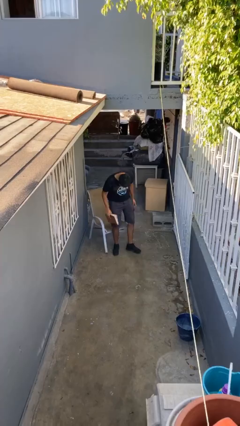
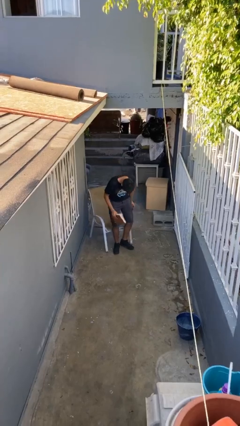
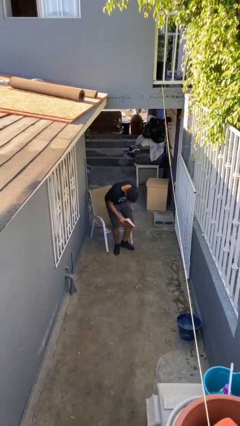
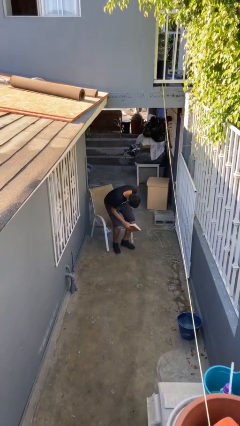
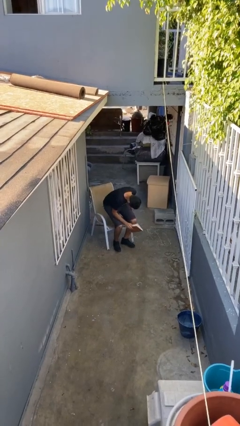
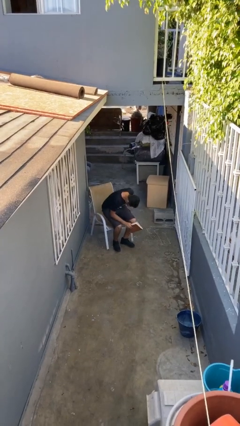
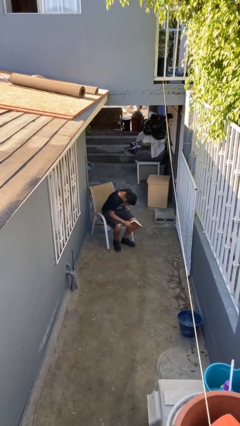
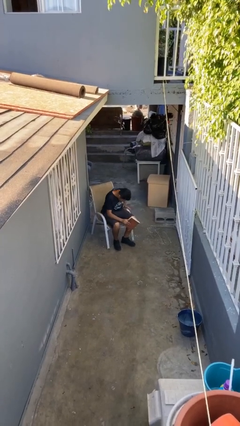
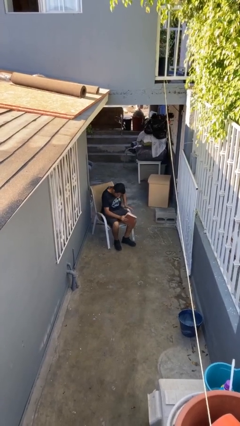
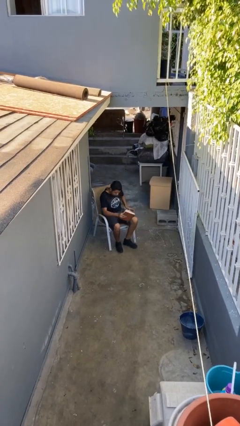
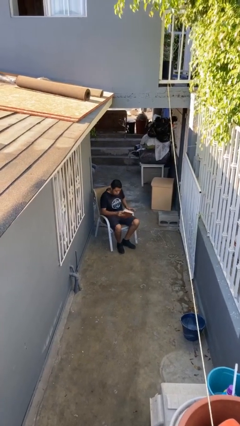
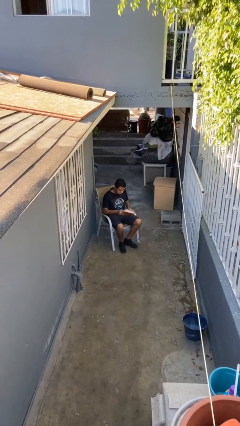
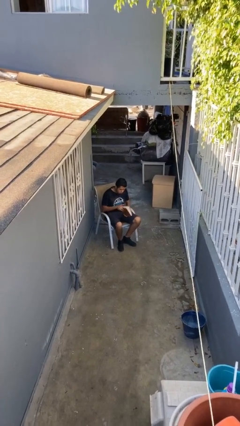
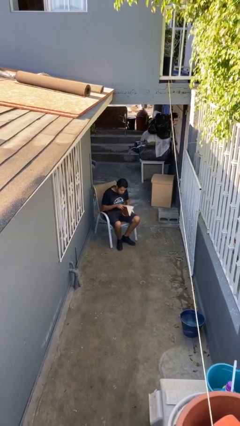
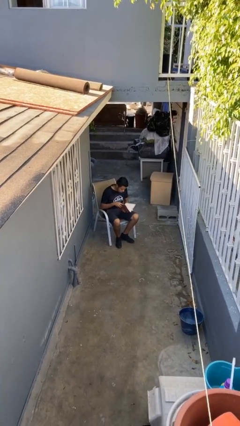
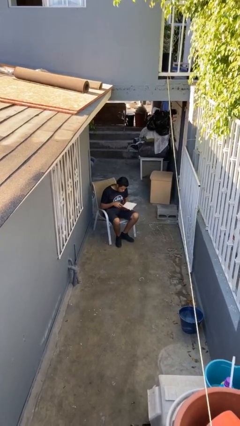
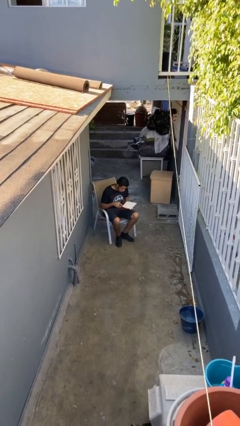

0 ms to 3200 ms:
person sits down

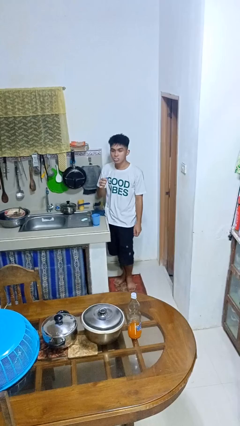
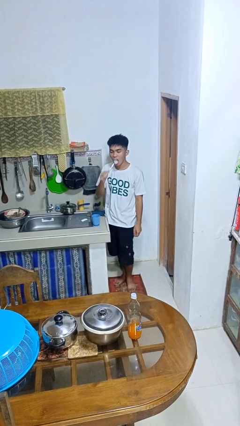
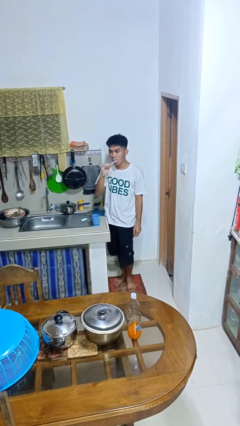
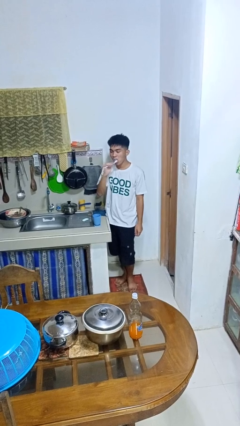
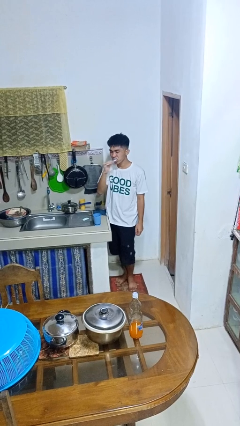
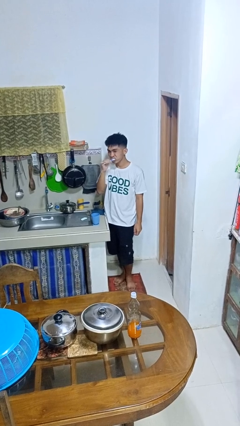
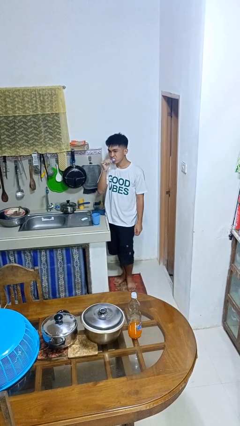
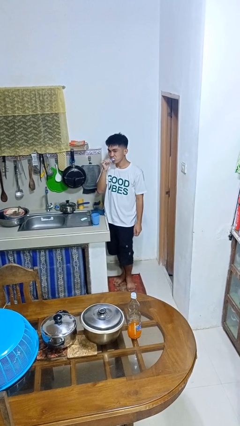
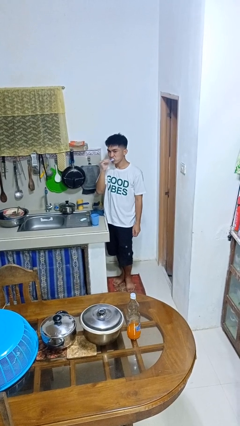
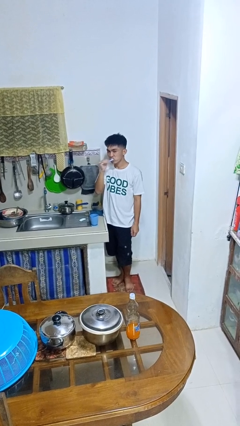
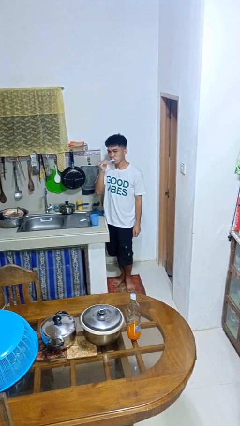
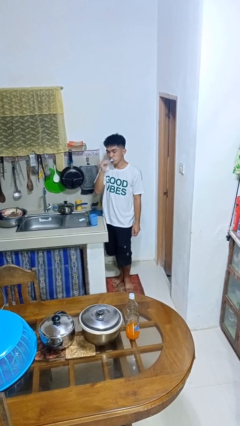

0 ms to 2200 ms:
person brushes teeth

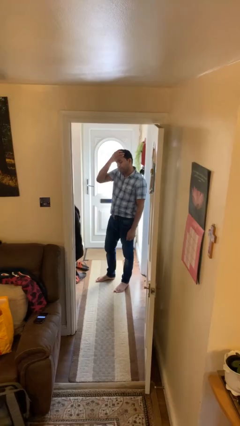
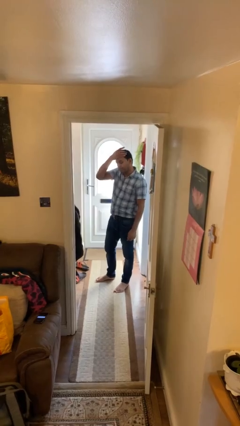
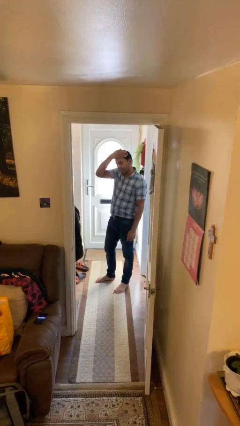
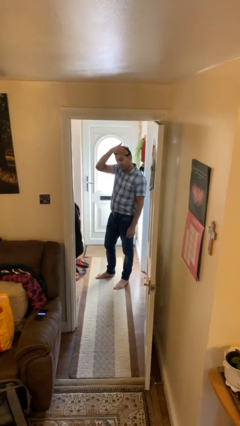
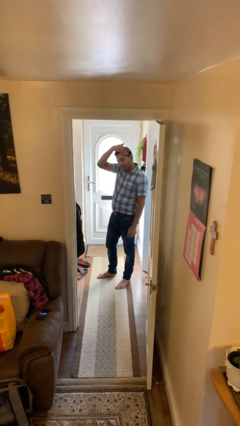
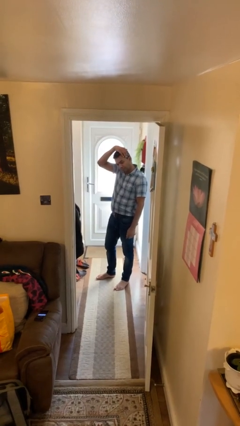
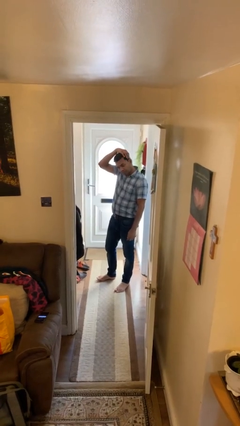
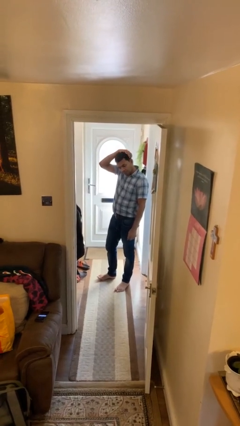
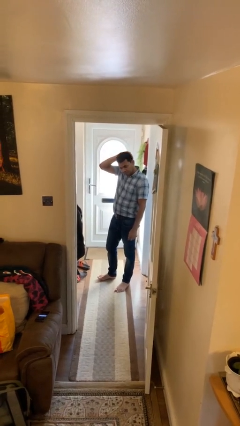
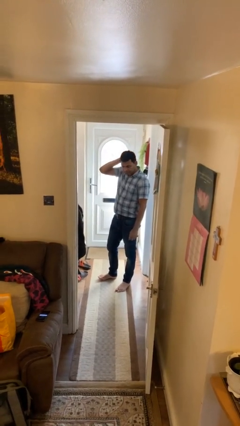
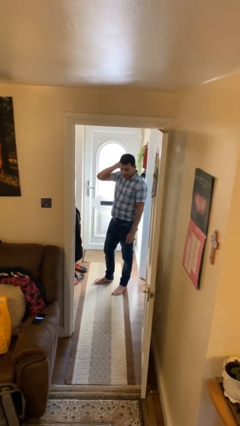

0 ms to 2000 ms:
person strokes hair

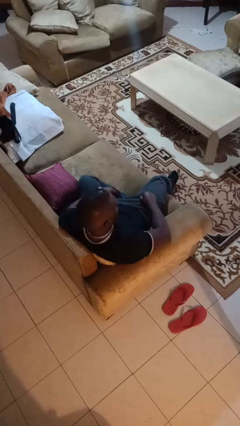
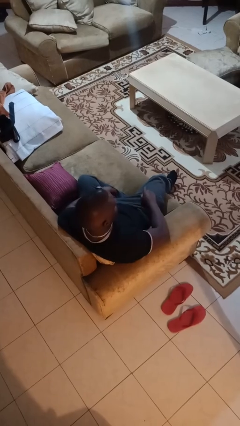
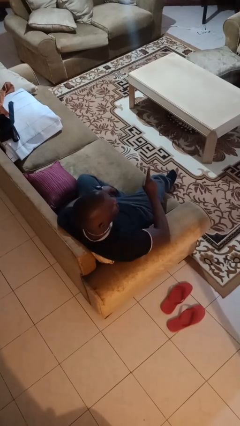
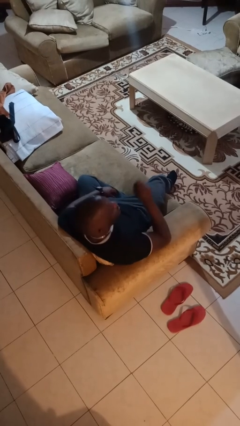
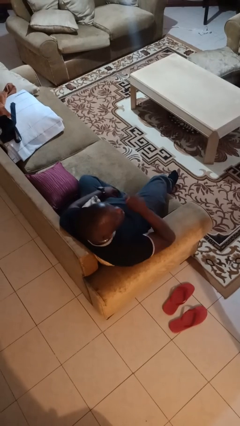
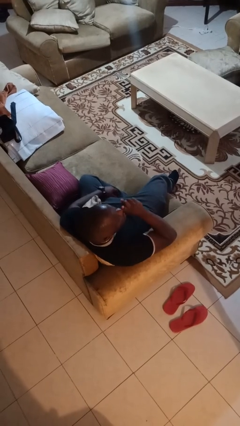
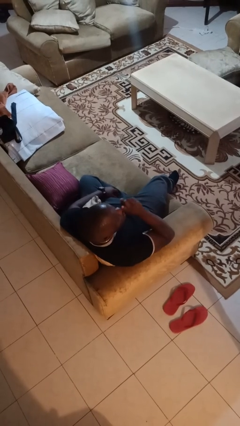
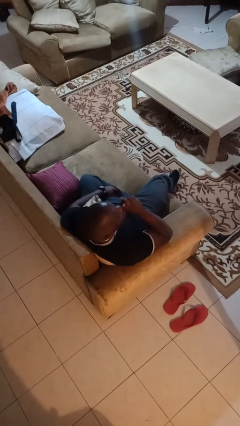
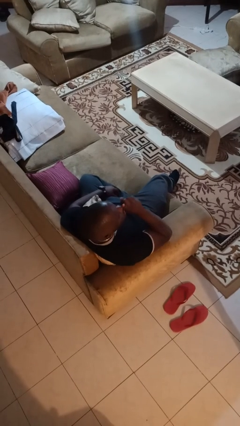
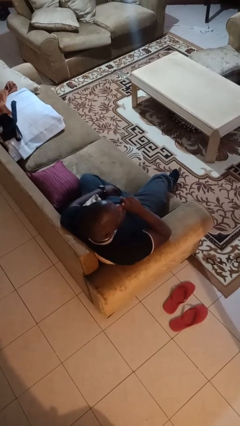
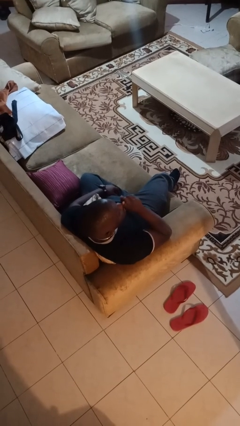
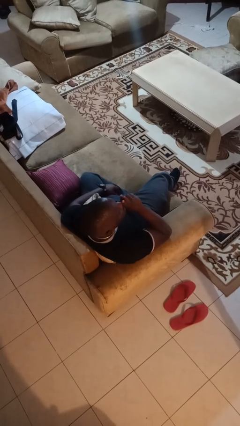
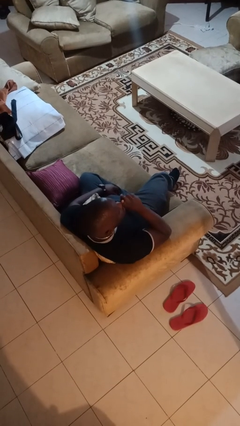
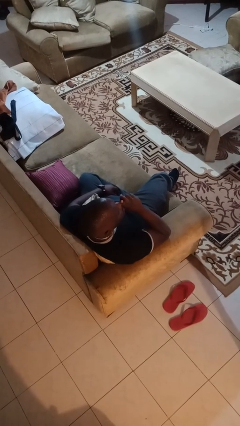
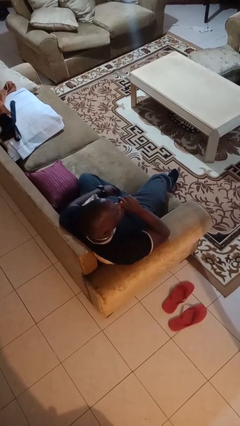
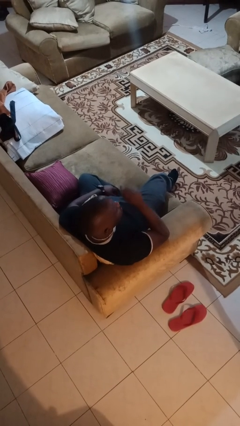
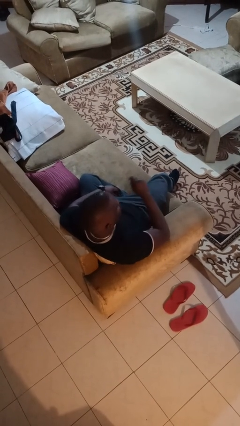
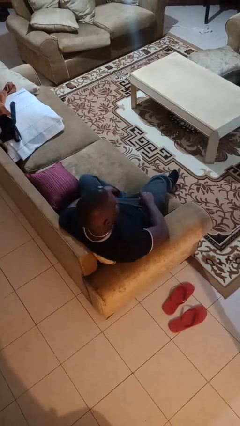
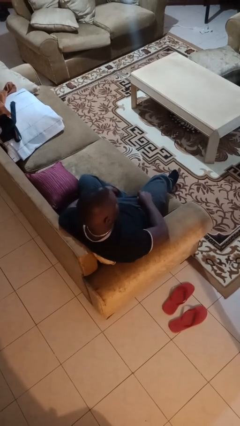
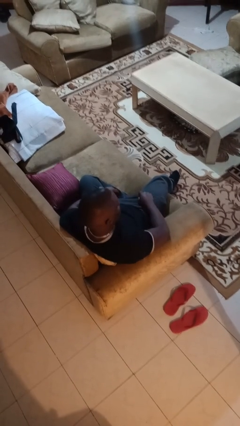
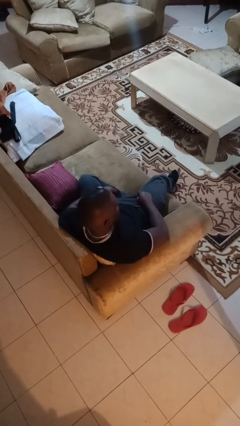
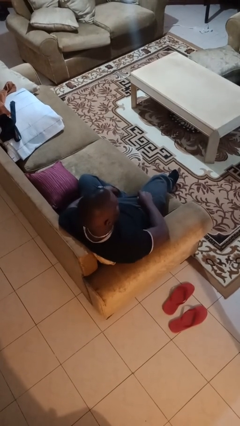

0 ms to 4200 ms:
person gestures be quiet

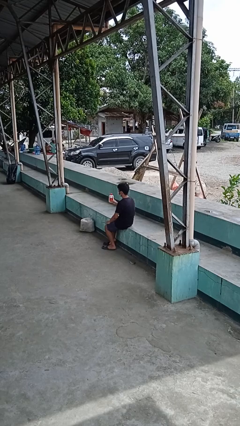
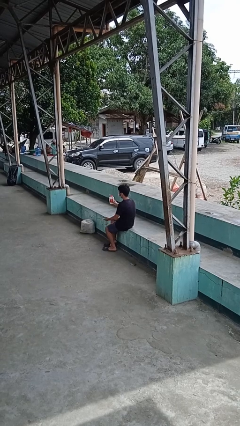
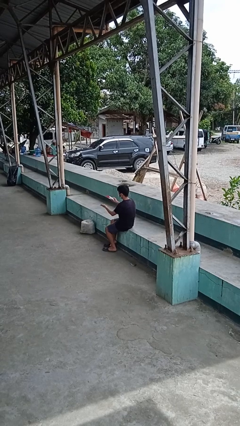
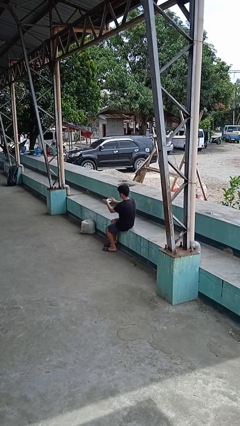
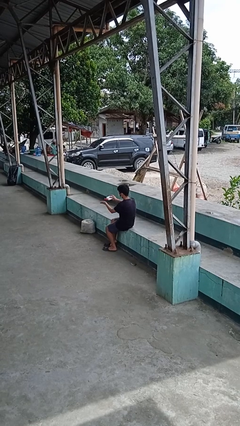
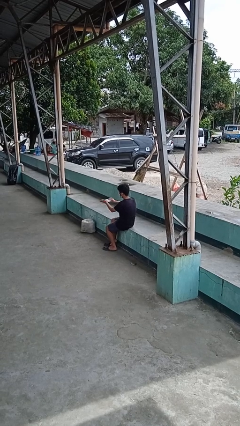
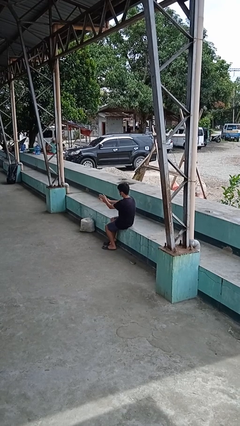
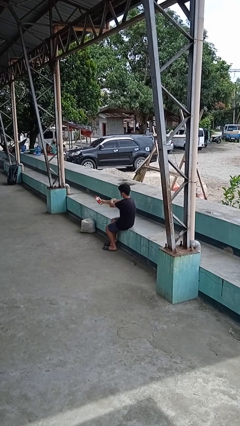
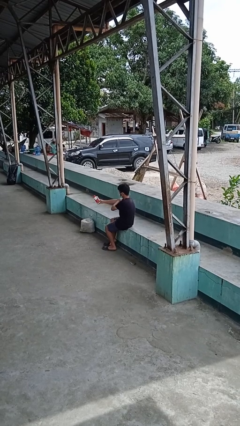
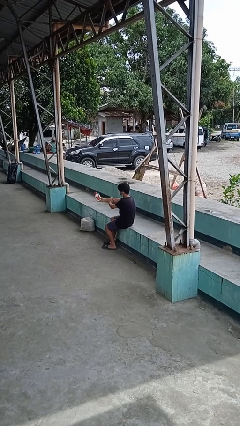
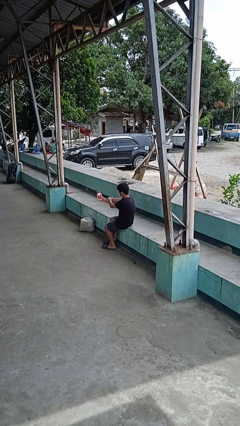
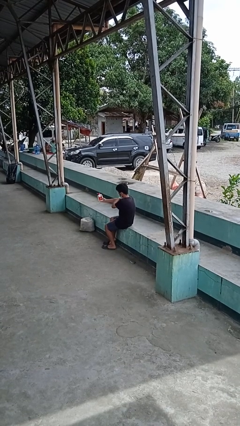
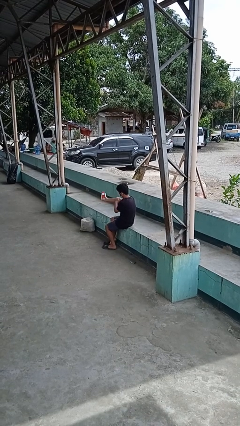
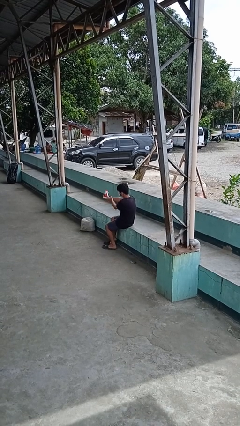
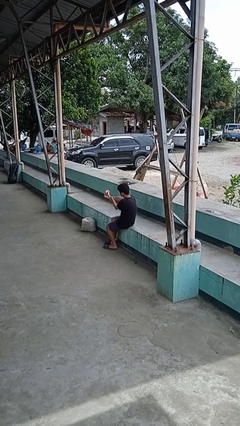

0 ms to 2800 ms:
person applies sunscreen

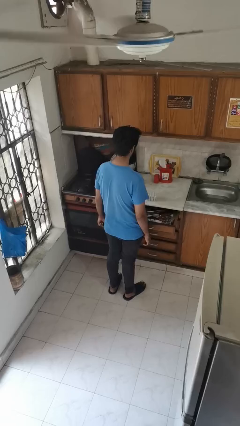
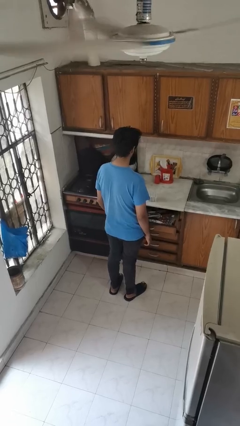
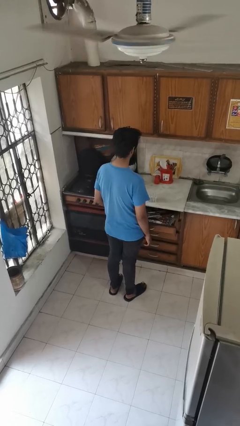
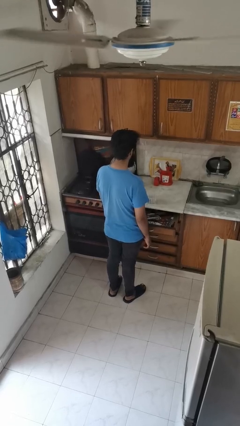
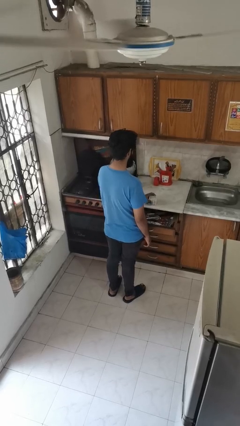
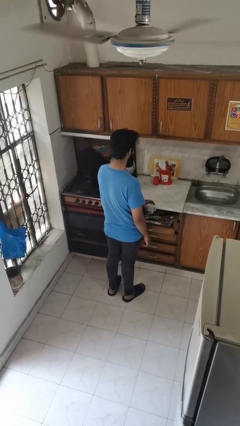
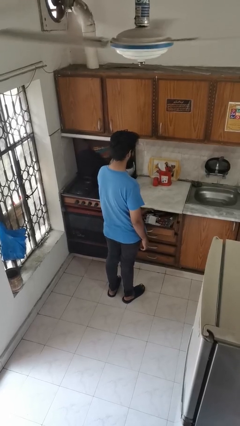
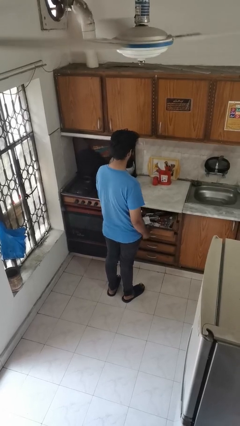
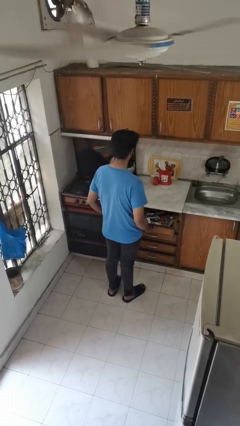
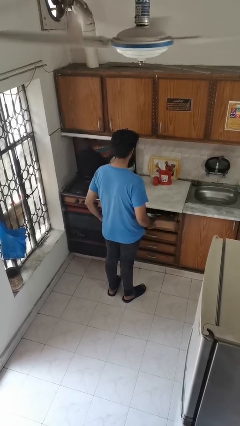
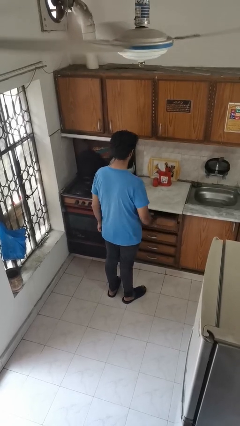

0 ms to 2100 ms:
person puts object into kitchen drawer

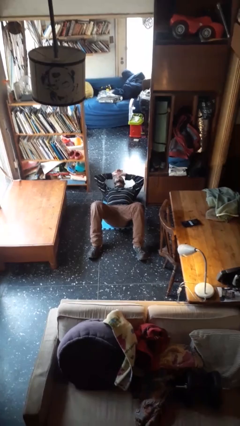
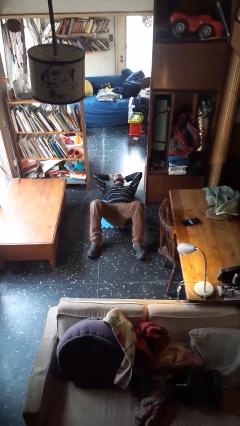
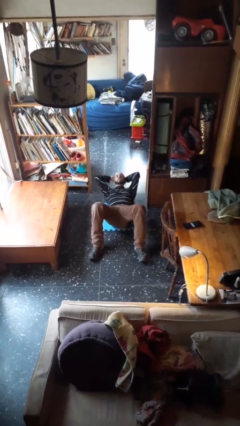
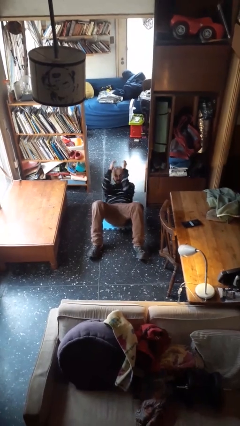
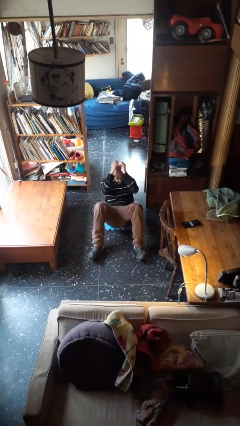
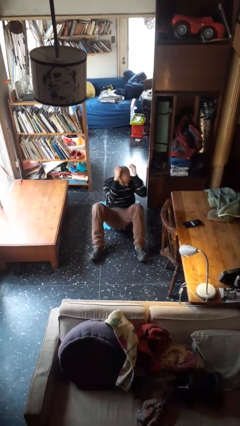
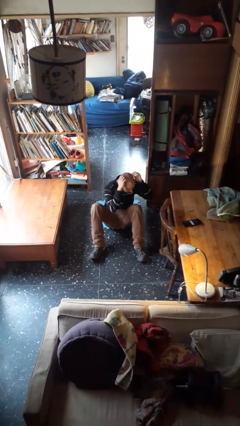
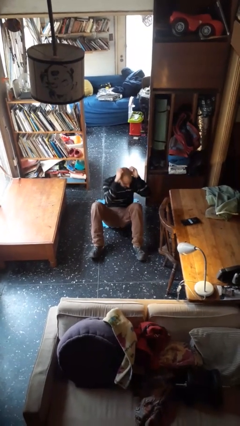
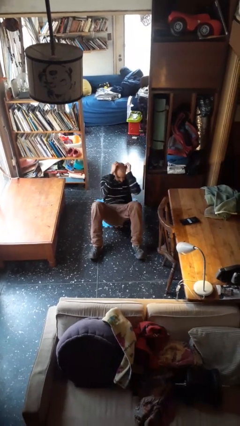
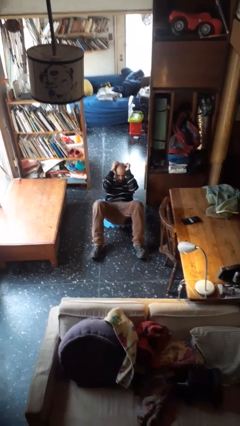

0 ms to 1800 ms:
person exercises with situp
